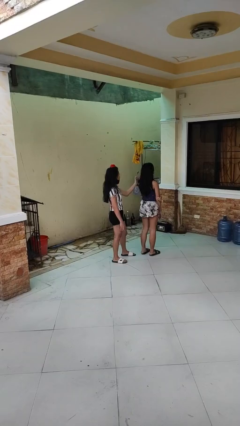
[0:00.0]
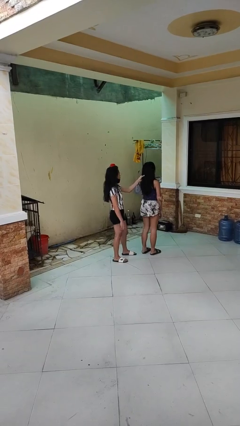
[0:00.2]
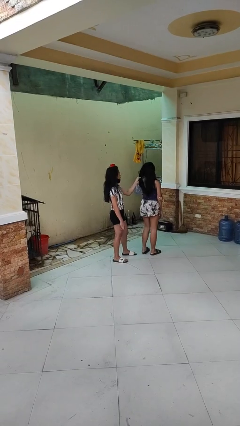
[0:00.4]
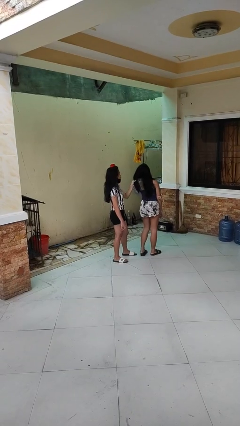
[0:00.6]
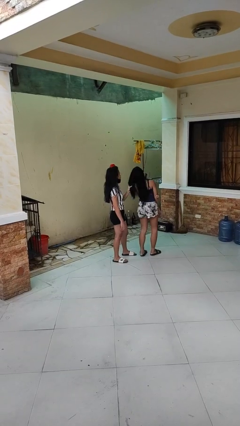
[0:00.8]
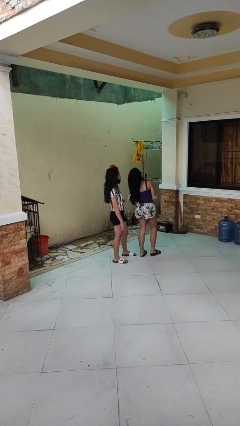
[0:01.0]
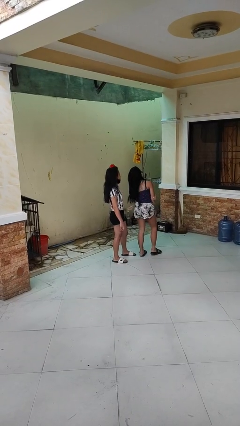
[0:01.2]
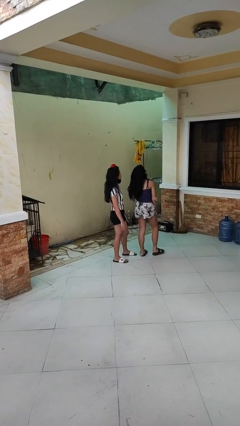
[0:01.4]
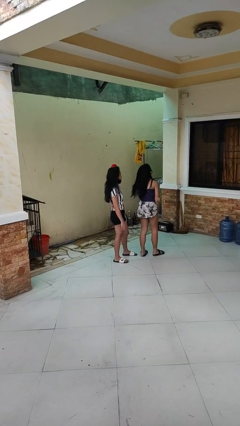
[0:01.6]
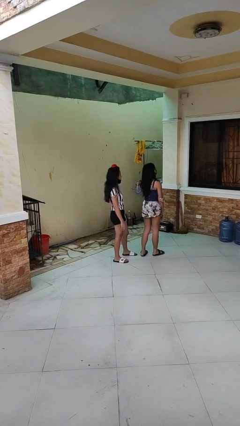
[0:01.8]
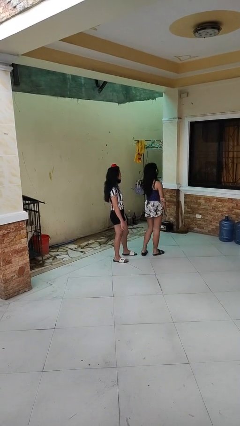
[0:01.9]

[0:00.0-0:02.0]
person grabs person by hair

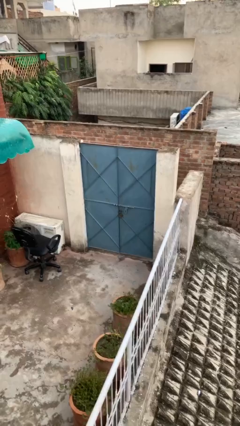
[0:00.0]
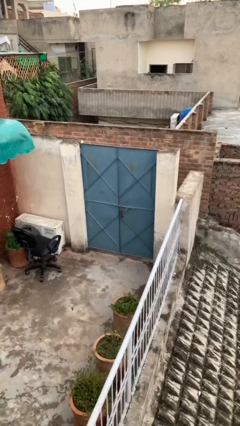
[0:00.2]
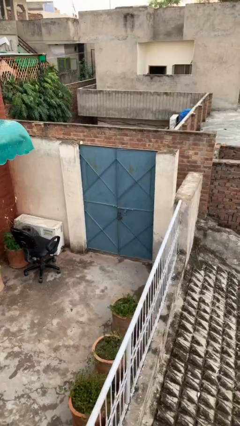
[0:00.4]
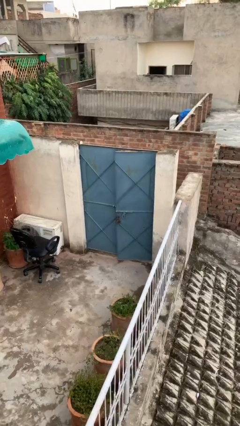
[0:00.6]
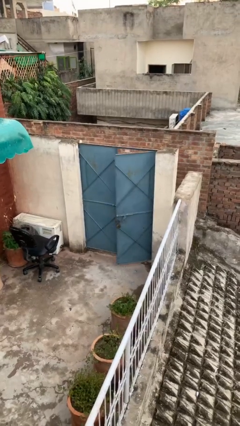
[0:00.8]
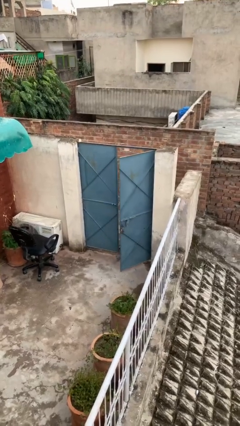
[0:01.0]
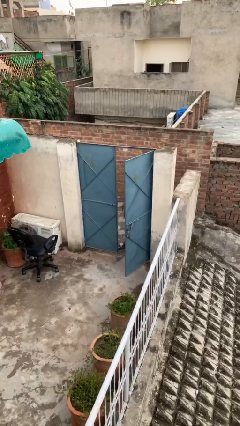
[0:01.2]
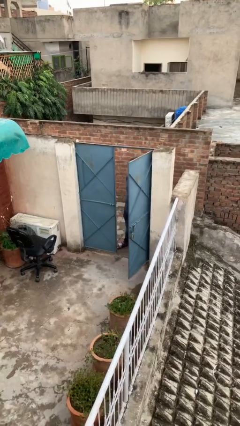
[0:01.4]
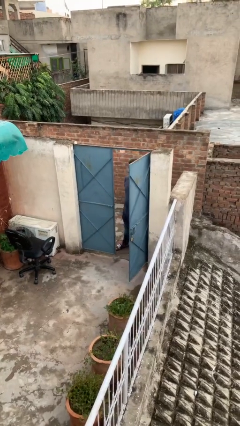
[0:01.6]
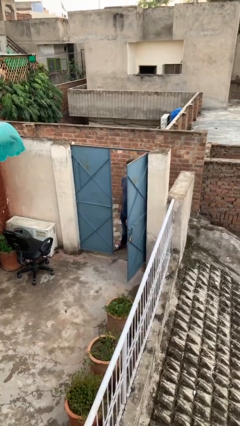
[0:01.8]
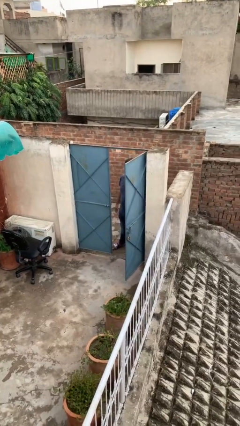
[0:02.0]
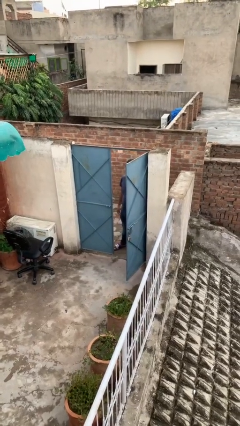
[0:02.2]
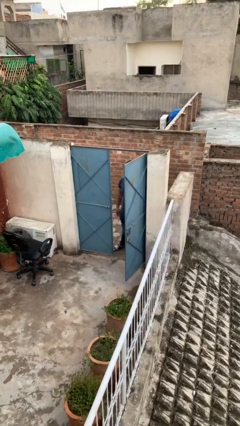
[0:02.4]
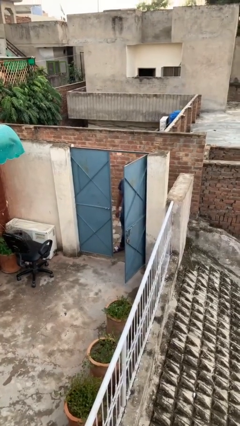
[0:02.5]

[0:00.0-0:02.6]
person opens facility door

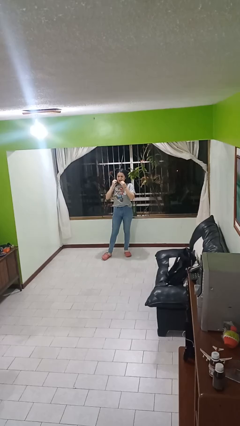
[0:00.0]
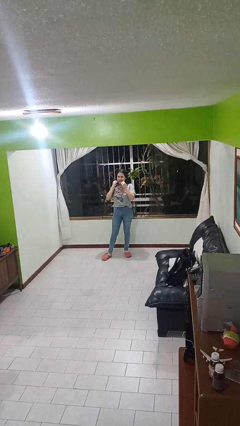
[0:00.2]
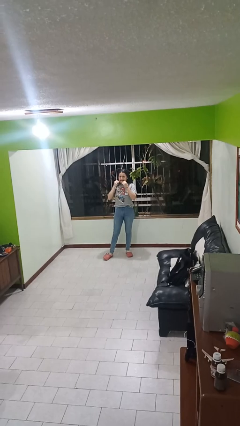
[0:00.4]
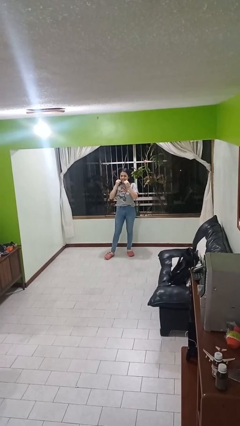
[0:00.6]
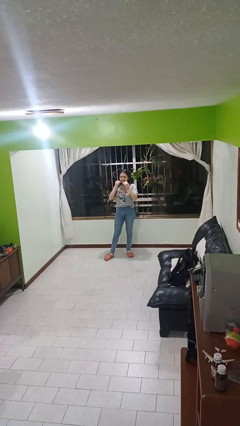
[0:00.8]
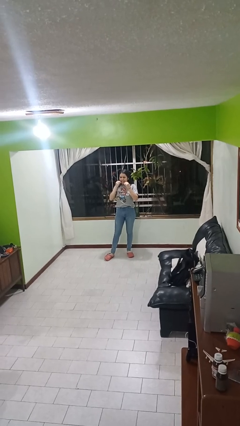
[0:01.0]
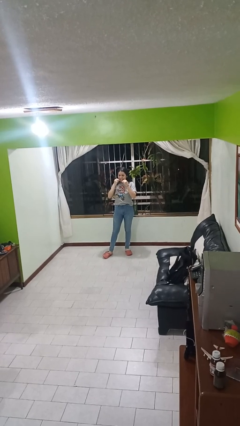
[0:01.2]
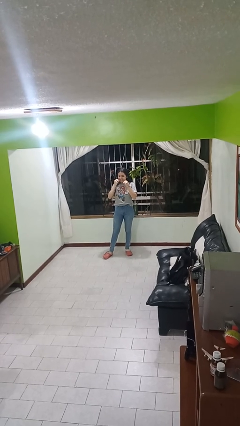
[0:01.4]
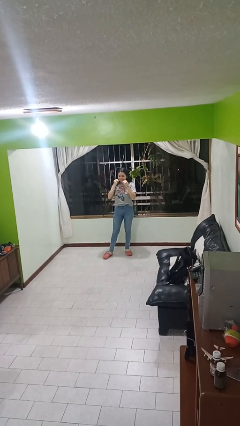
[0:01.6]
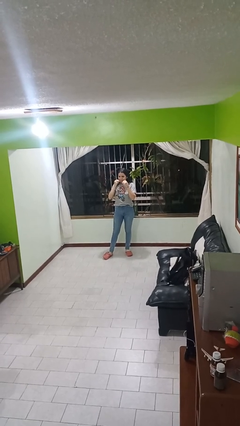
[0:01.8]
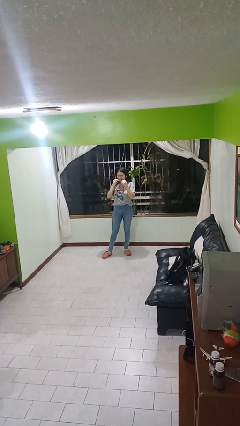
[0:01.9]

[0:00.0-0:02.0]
person flosses

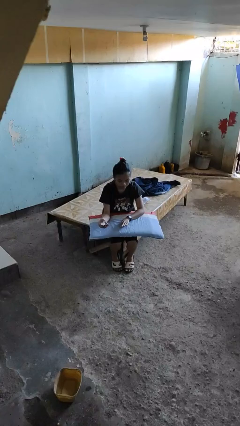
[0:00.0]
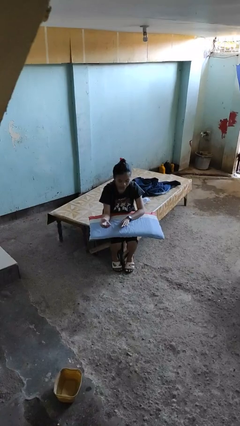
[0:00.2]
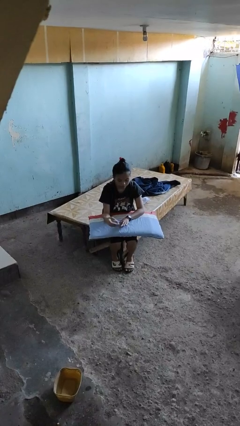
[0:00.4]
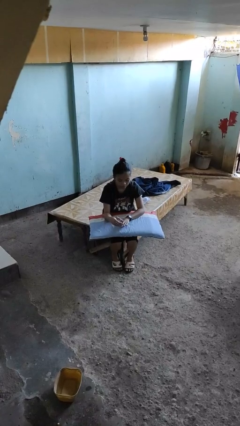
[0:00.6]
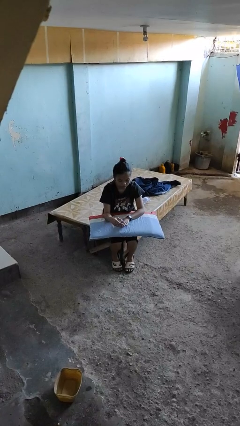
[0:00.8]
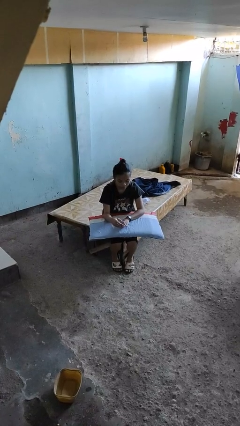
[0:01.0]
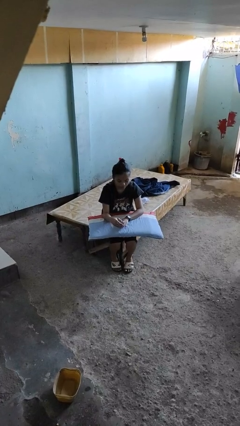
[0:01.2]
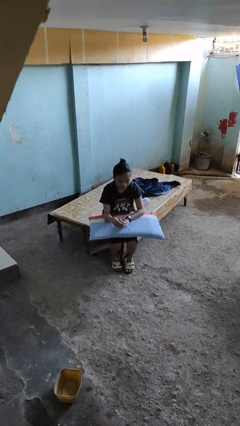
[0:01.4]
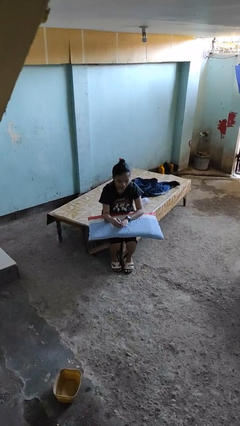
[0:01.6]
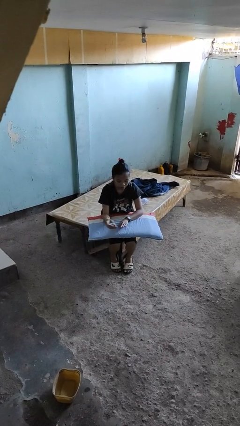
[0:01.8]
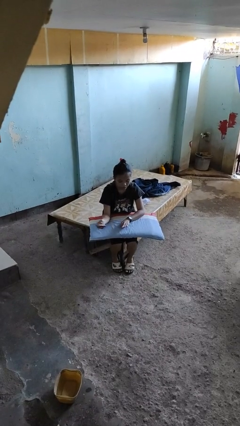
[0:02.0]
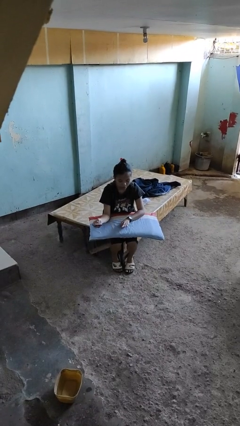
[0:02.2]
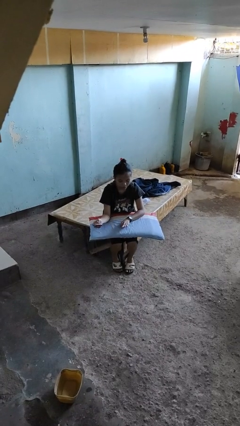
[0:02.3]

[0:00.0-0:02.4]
person clips fingernails

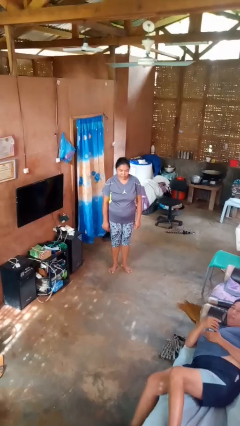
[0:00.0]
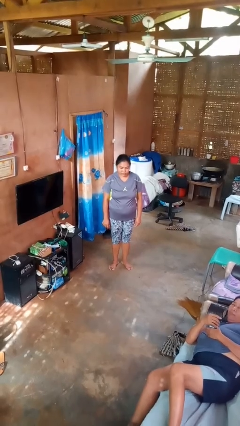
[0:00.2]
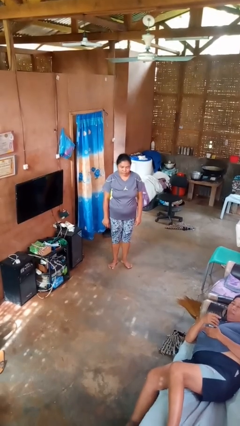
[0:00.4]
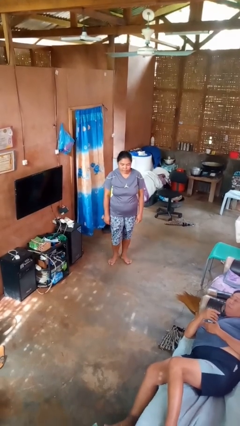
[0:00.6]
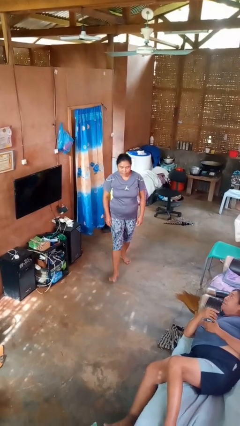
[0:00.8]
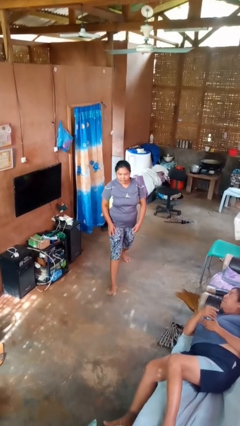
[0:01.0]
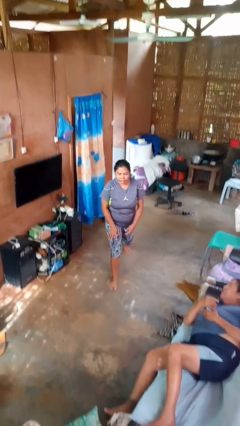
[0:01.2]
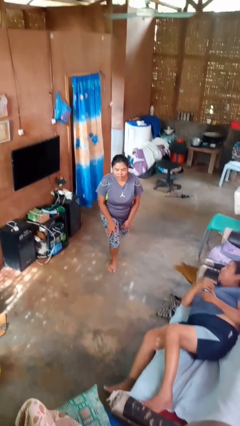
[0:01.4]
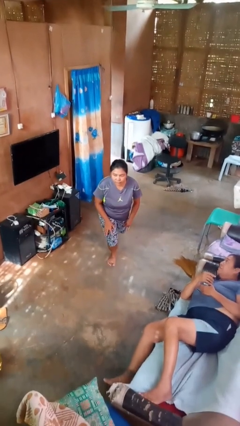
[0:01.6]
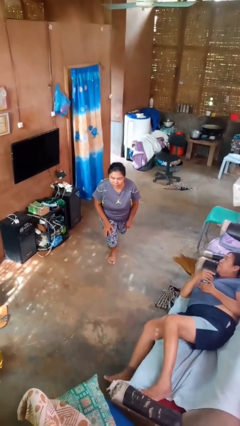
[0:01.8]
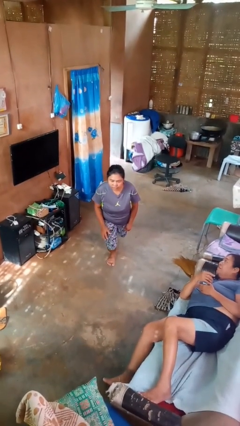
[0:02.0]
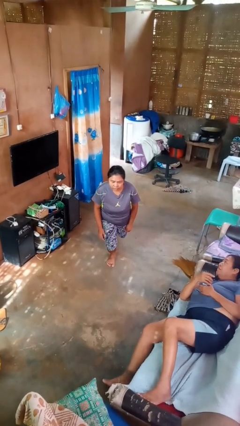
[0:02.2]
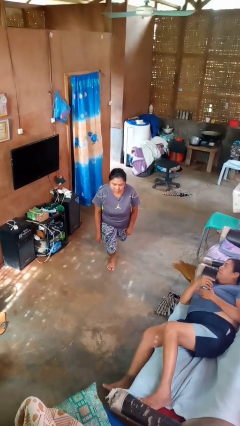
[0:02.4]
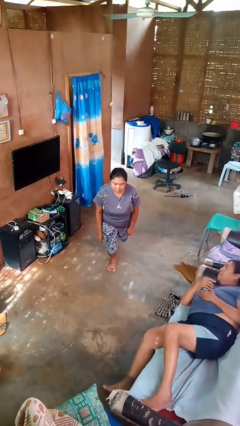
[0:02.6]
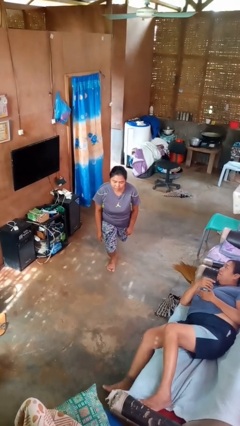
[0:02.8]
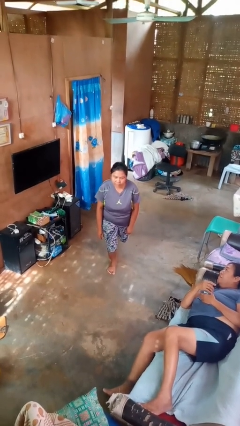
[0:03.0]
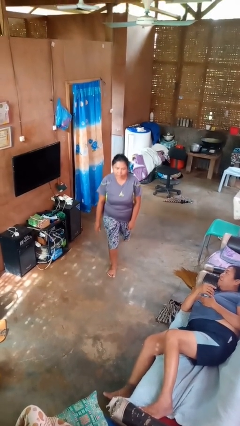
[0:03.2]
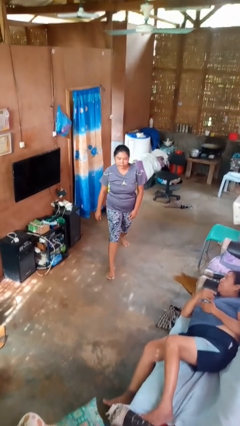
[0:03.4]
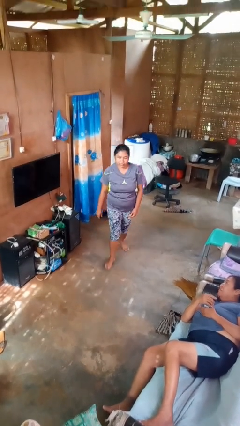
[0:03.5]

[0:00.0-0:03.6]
person exercises with lunges

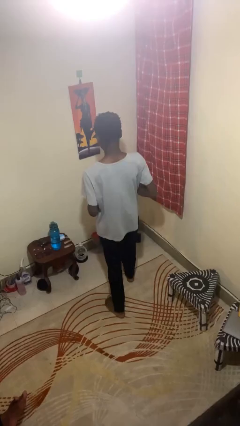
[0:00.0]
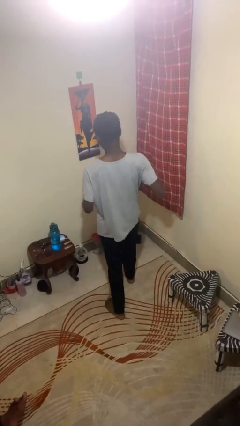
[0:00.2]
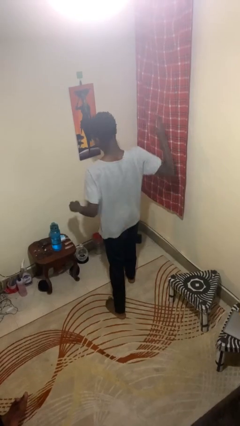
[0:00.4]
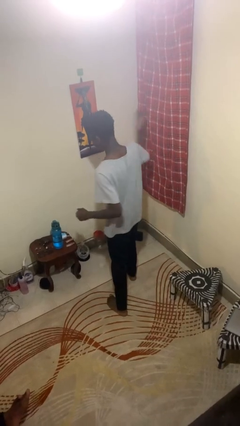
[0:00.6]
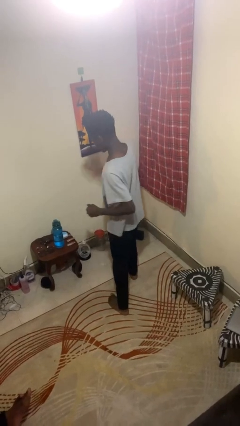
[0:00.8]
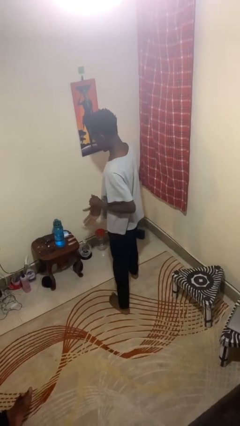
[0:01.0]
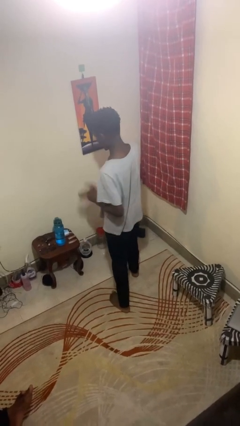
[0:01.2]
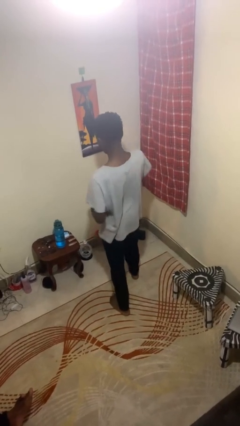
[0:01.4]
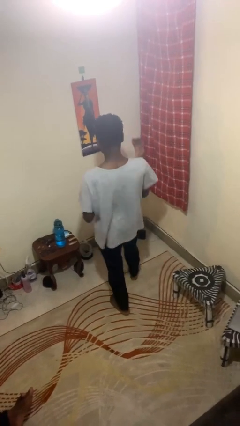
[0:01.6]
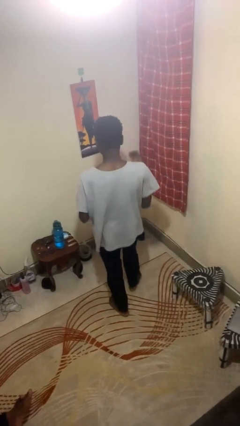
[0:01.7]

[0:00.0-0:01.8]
person karate chop

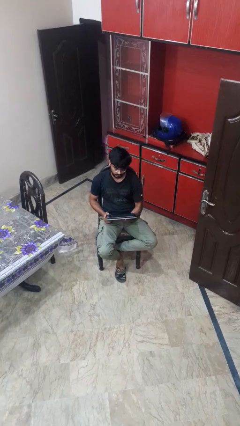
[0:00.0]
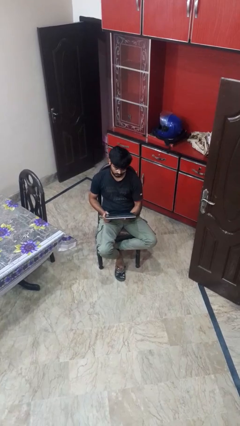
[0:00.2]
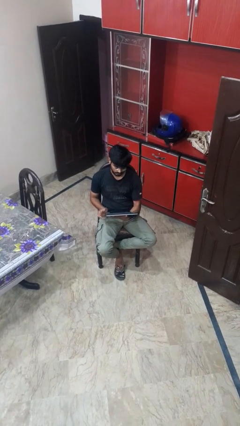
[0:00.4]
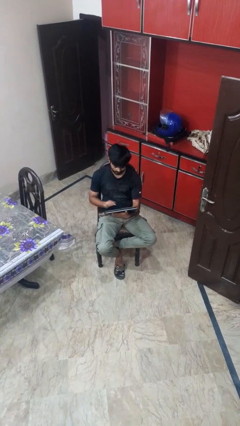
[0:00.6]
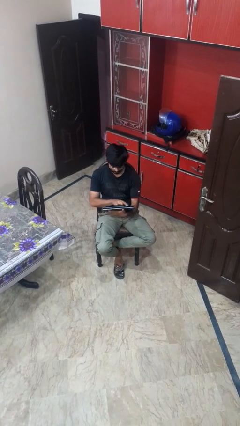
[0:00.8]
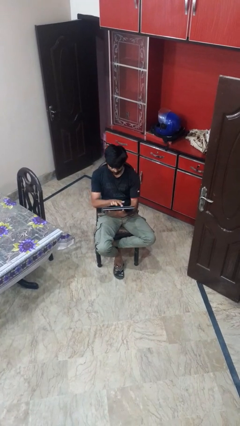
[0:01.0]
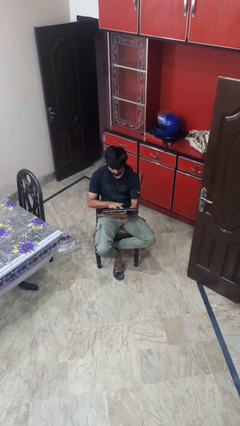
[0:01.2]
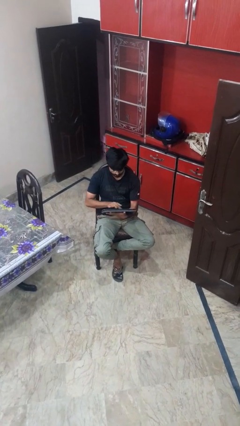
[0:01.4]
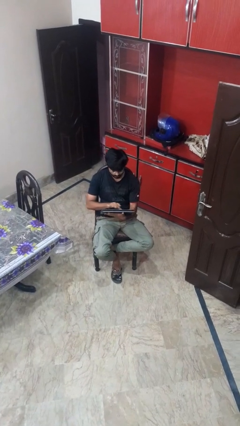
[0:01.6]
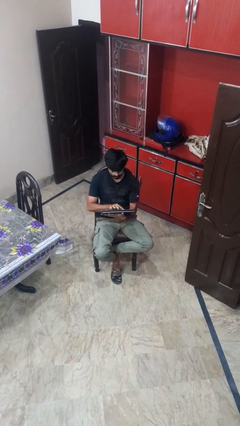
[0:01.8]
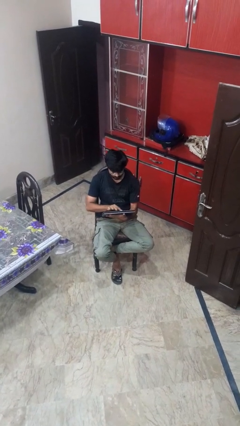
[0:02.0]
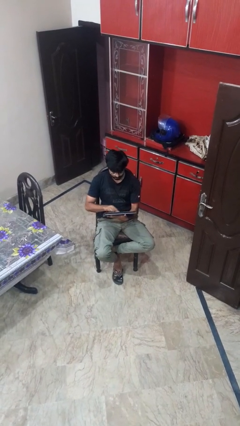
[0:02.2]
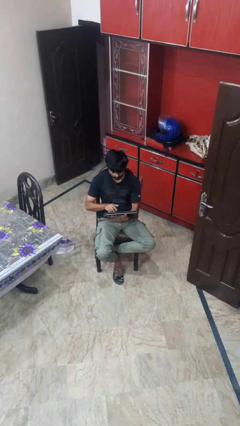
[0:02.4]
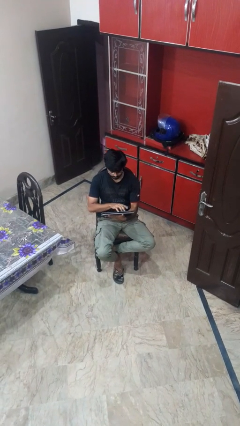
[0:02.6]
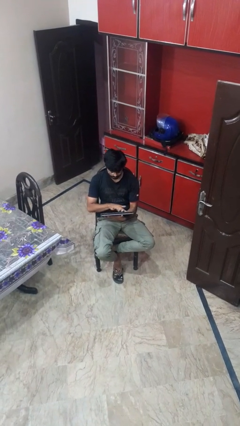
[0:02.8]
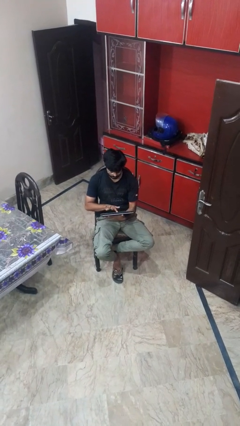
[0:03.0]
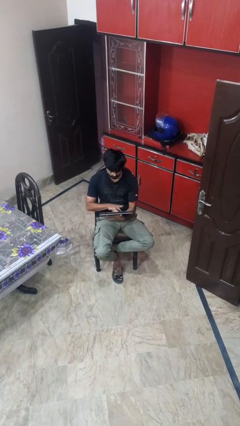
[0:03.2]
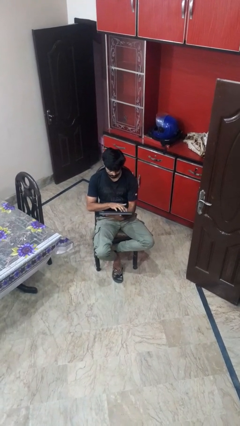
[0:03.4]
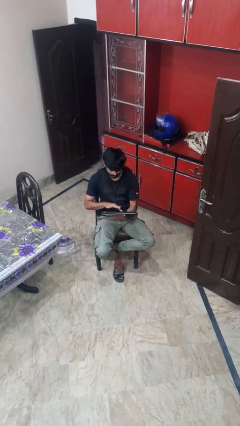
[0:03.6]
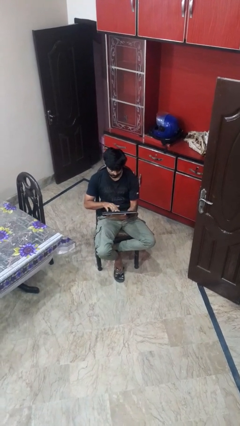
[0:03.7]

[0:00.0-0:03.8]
person interacts with tablet
